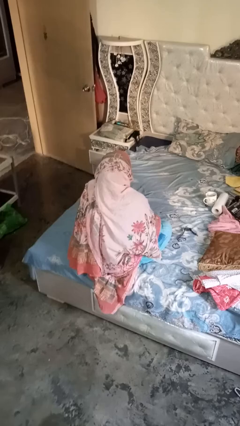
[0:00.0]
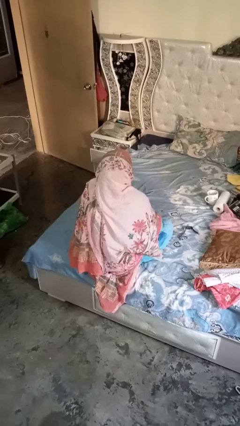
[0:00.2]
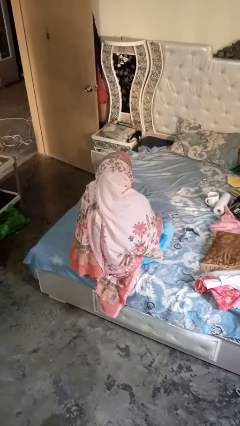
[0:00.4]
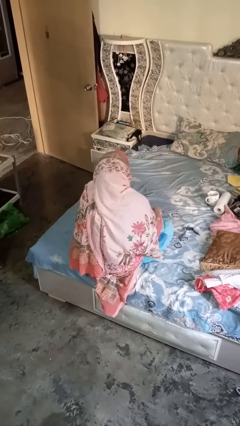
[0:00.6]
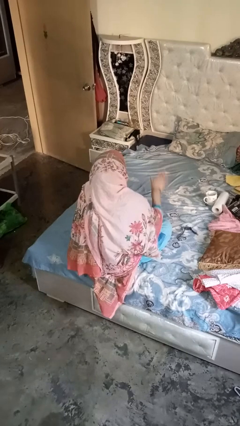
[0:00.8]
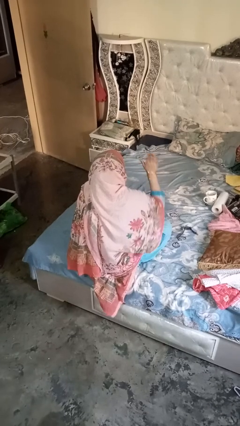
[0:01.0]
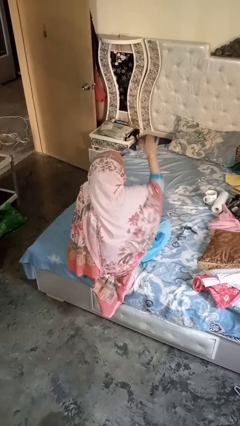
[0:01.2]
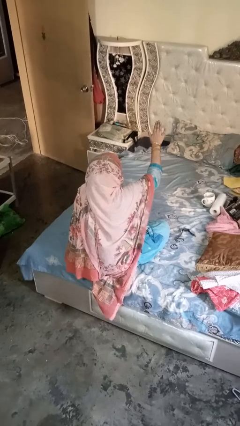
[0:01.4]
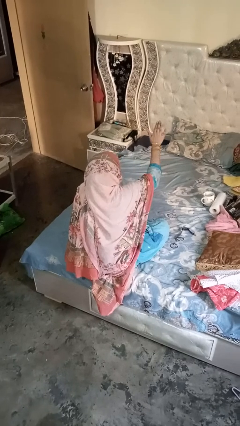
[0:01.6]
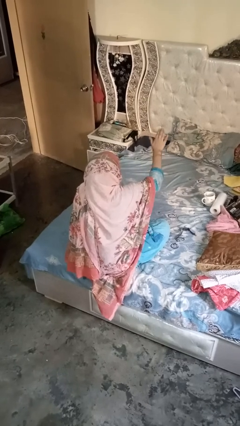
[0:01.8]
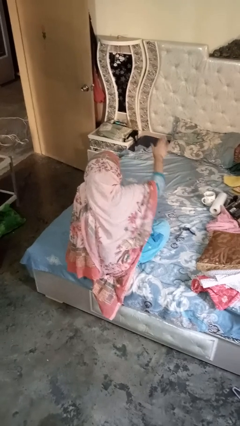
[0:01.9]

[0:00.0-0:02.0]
person gestures stop

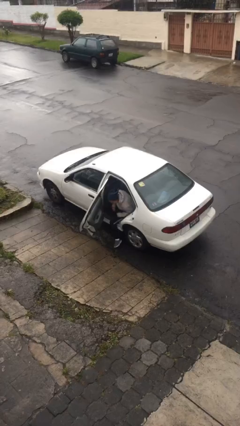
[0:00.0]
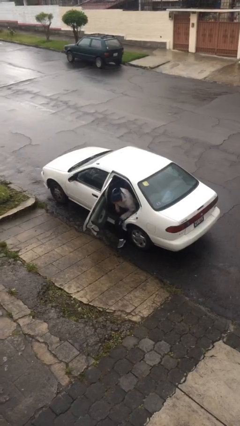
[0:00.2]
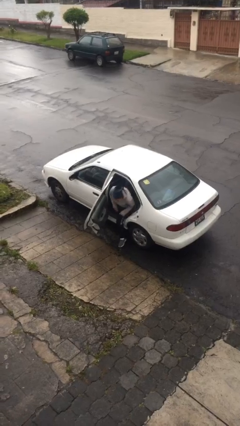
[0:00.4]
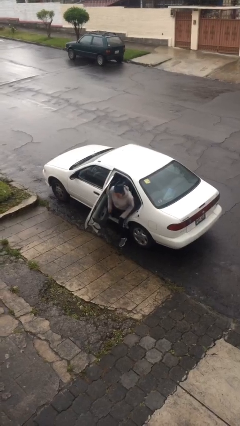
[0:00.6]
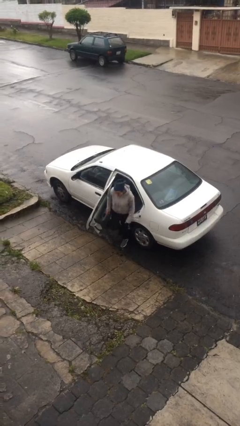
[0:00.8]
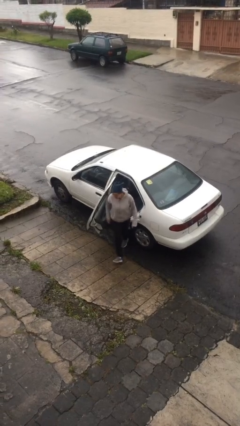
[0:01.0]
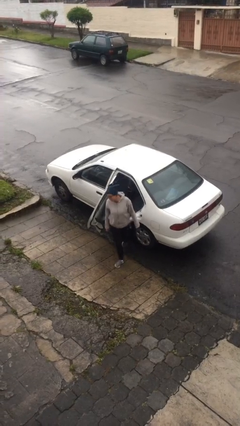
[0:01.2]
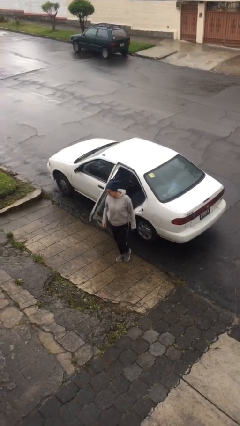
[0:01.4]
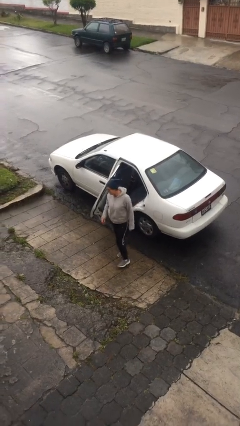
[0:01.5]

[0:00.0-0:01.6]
person exits car

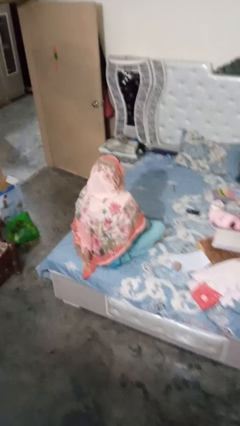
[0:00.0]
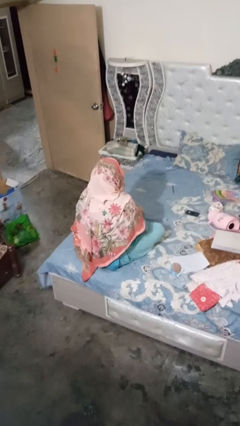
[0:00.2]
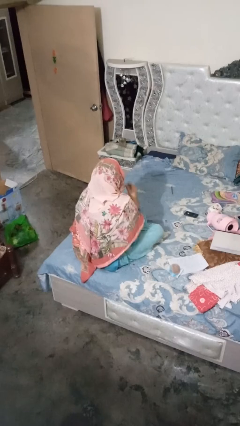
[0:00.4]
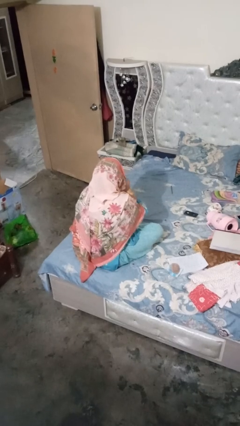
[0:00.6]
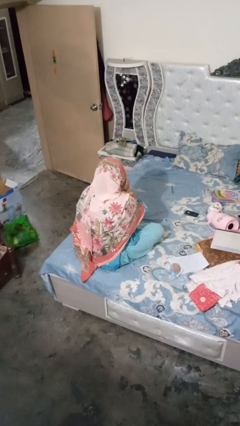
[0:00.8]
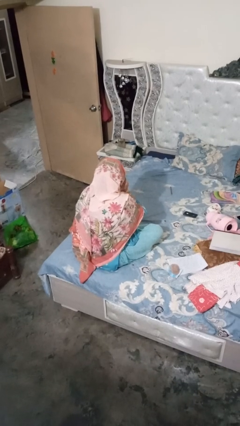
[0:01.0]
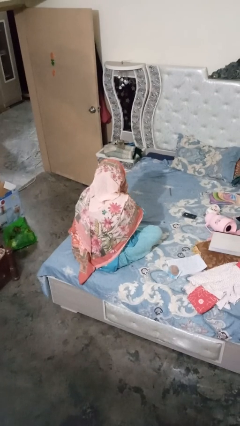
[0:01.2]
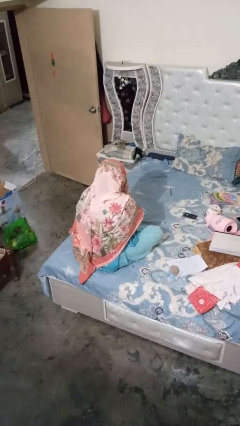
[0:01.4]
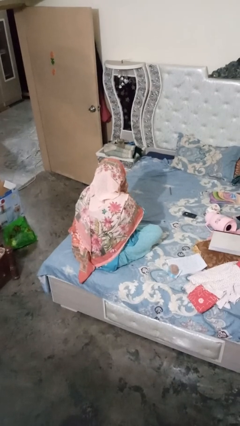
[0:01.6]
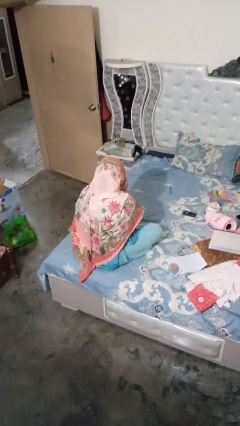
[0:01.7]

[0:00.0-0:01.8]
person gestures listen closely

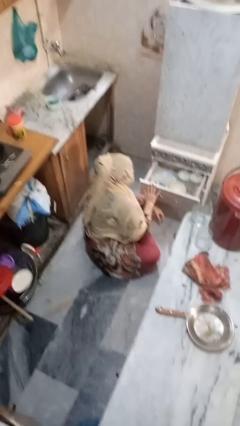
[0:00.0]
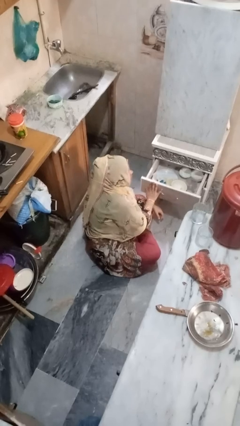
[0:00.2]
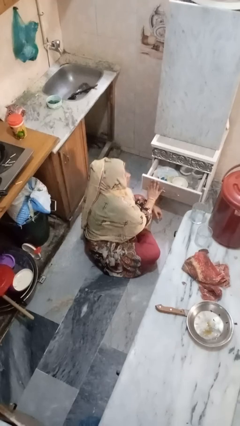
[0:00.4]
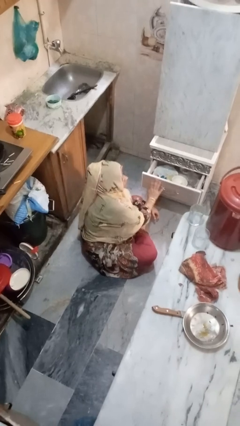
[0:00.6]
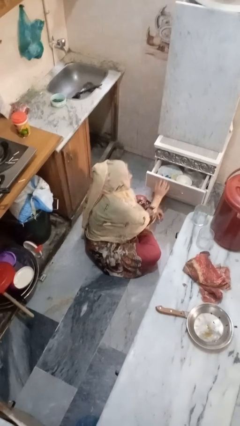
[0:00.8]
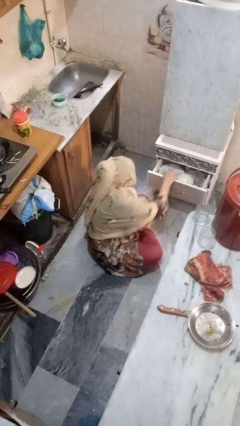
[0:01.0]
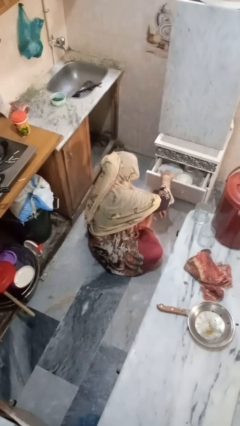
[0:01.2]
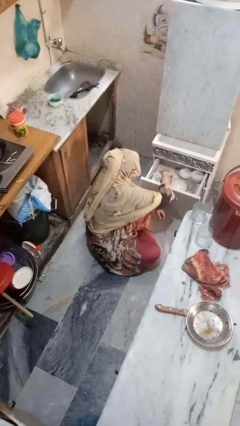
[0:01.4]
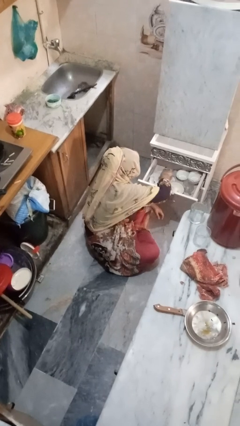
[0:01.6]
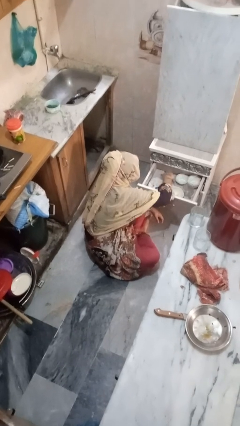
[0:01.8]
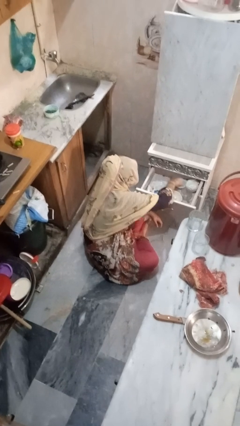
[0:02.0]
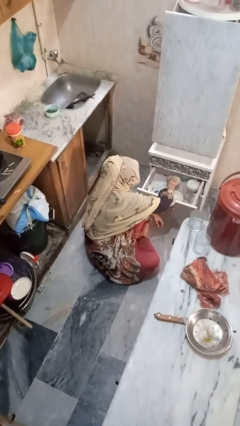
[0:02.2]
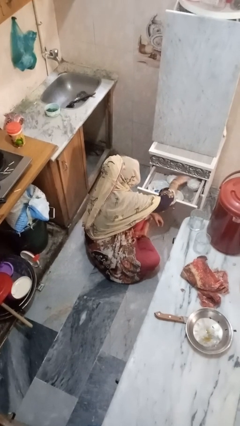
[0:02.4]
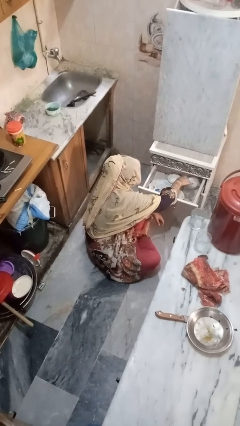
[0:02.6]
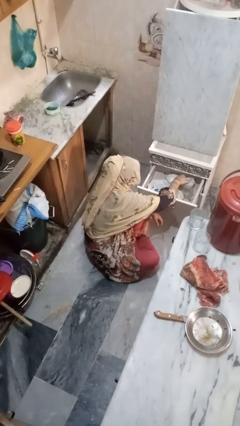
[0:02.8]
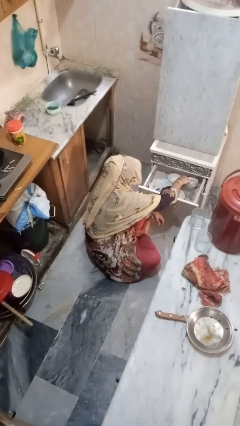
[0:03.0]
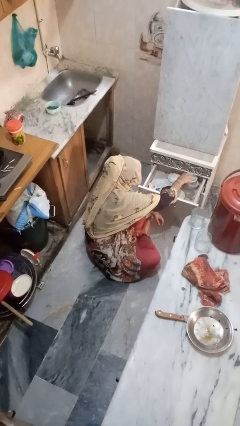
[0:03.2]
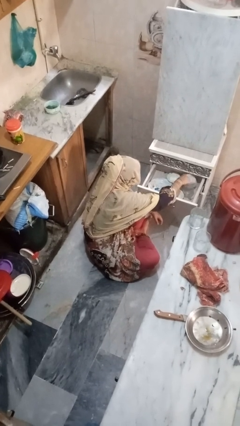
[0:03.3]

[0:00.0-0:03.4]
person searches in kitchen drawer

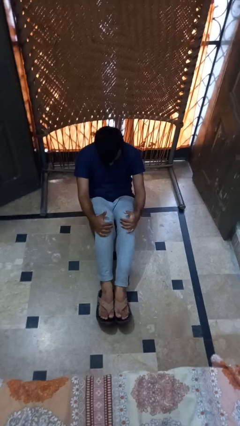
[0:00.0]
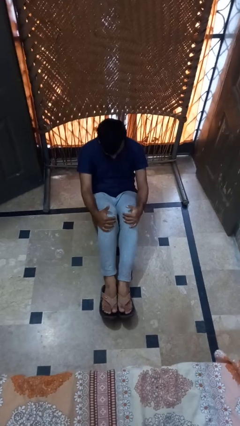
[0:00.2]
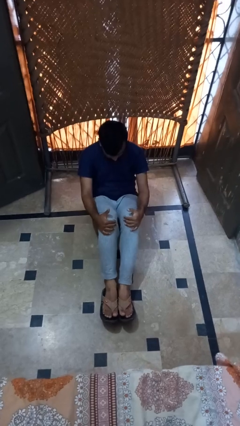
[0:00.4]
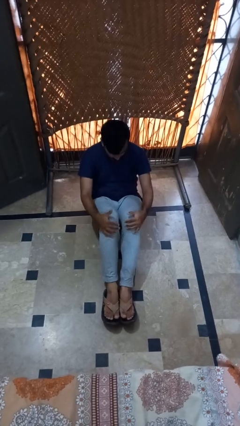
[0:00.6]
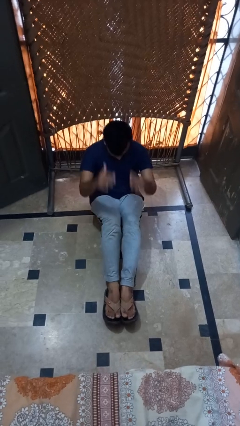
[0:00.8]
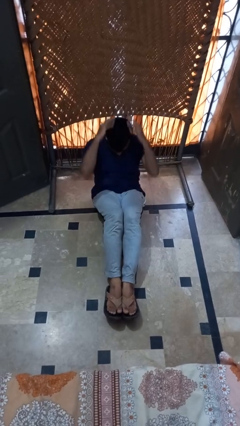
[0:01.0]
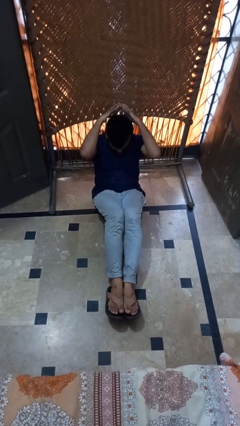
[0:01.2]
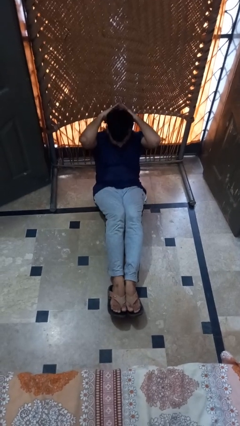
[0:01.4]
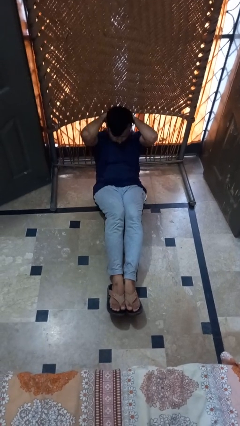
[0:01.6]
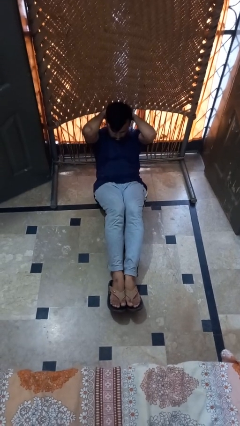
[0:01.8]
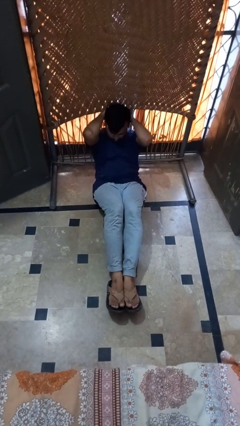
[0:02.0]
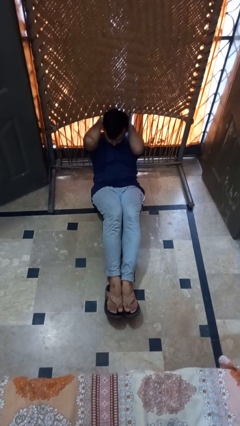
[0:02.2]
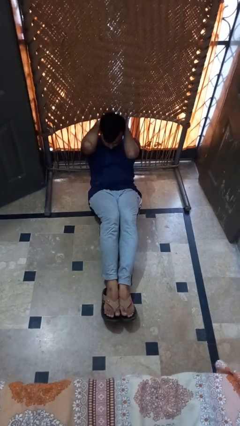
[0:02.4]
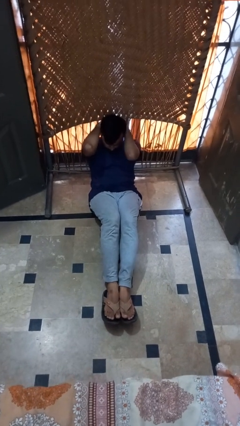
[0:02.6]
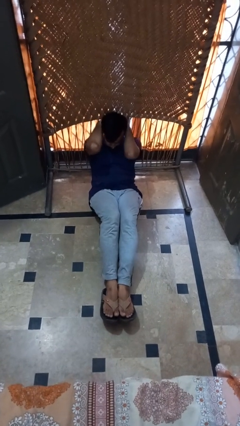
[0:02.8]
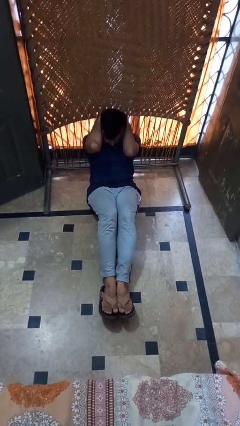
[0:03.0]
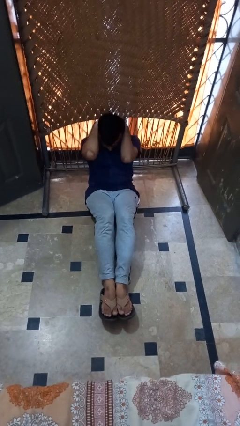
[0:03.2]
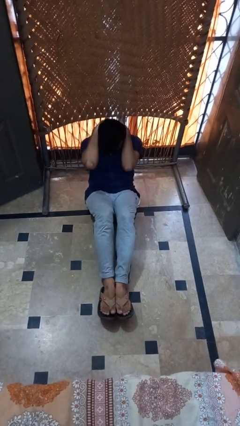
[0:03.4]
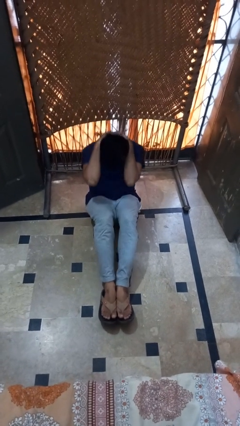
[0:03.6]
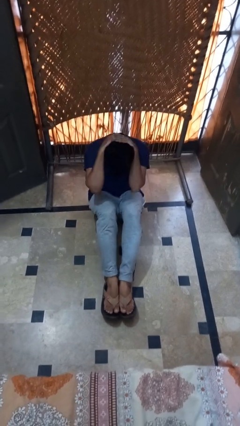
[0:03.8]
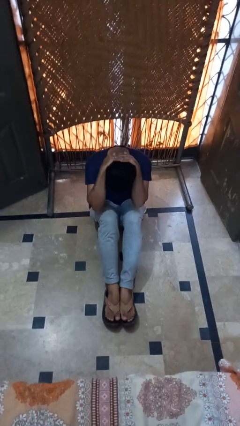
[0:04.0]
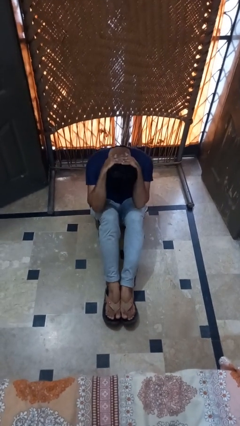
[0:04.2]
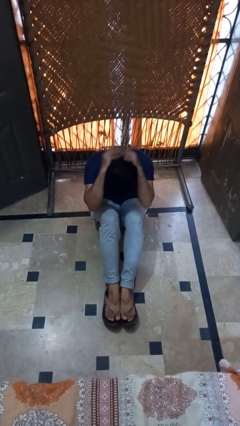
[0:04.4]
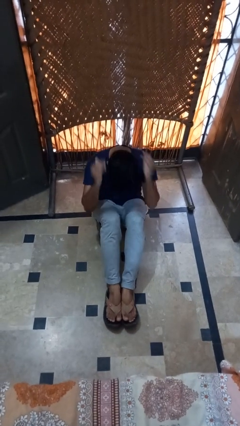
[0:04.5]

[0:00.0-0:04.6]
person exercises with situp

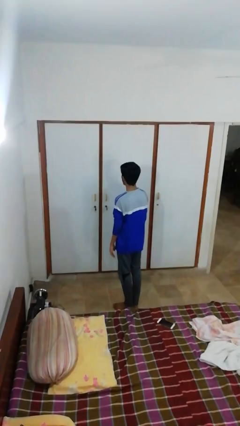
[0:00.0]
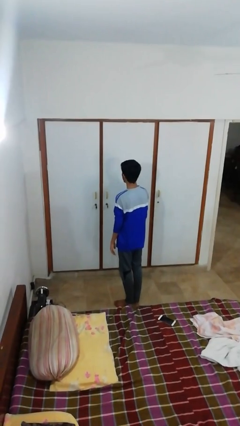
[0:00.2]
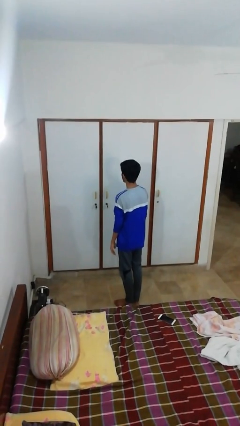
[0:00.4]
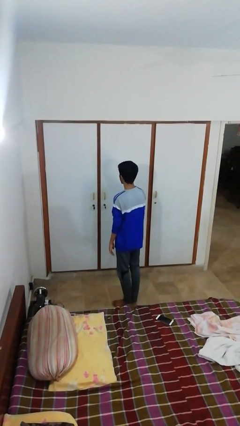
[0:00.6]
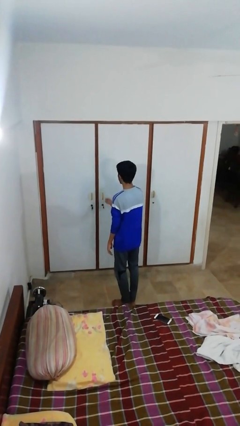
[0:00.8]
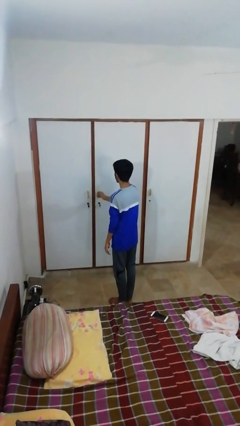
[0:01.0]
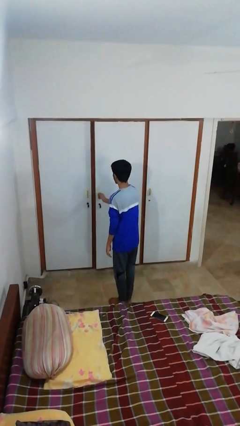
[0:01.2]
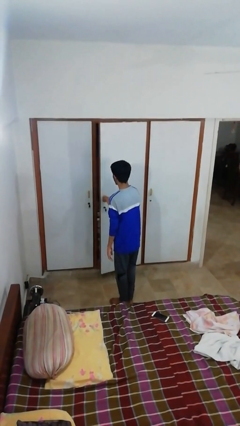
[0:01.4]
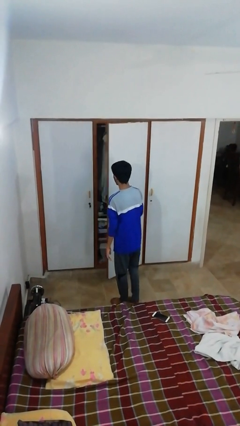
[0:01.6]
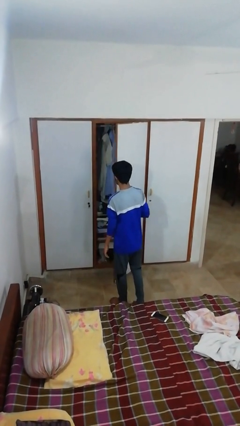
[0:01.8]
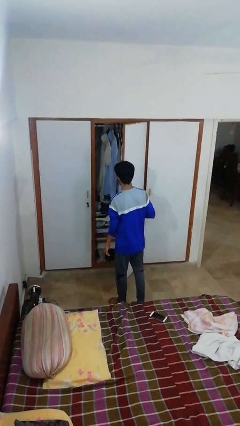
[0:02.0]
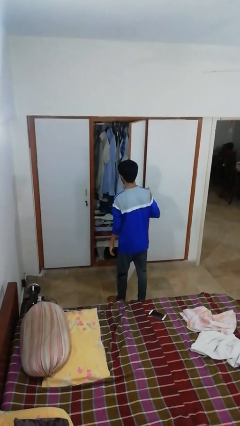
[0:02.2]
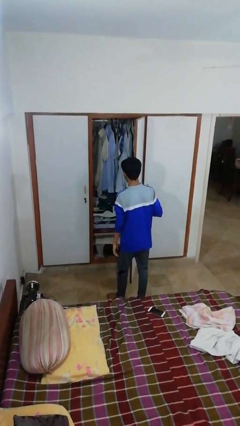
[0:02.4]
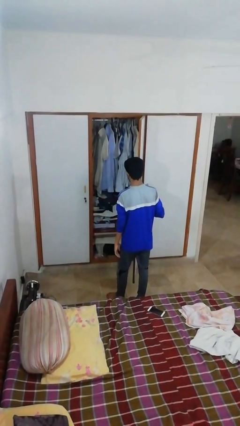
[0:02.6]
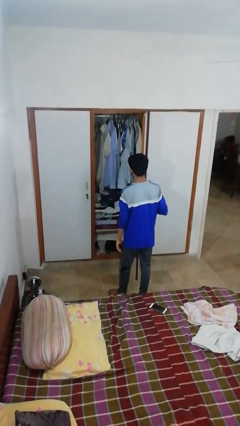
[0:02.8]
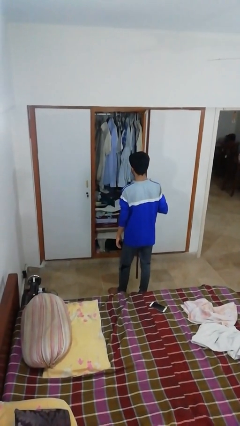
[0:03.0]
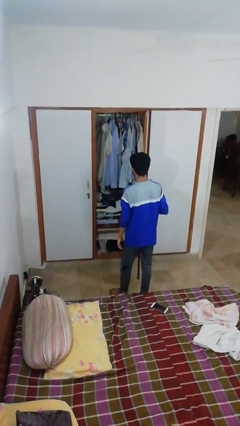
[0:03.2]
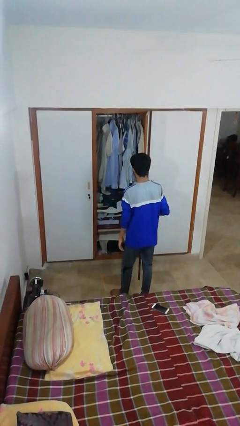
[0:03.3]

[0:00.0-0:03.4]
person opens closet door

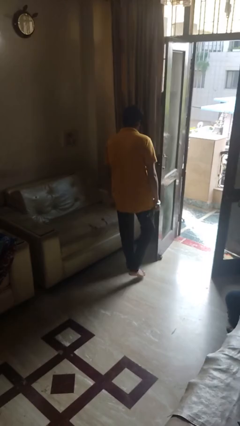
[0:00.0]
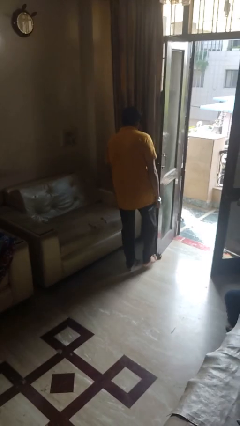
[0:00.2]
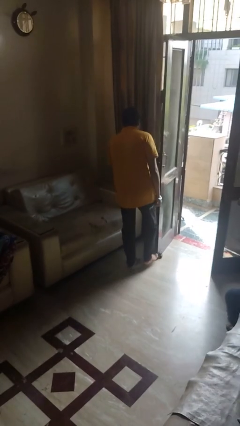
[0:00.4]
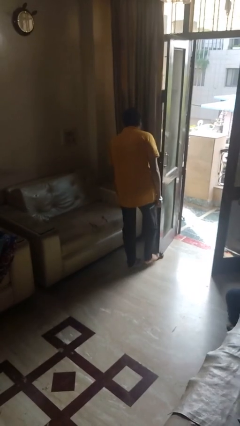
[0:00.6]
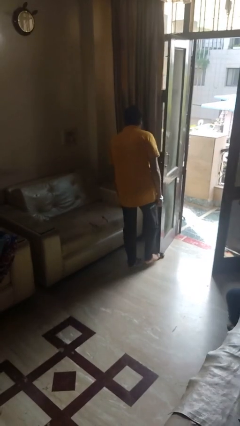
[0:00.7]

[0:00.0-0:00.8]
person stubs toe
